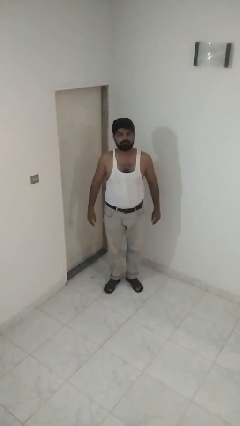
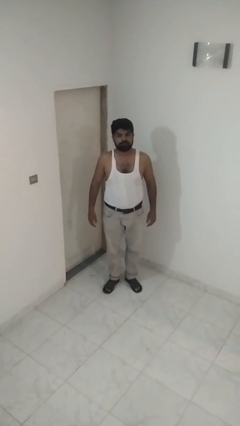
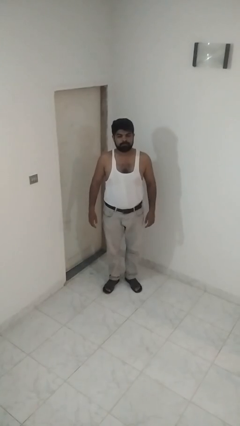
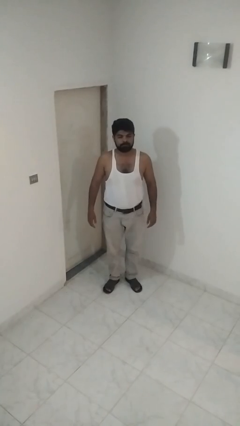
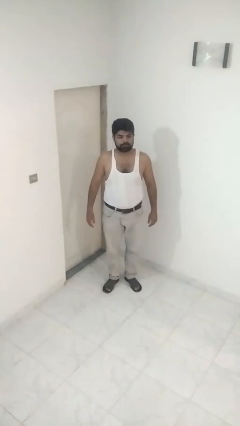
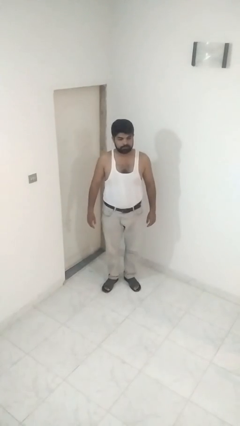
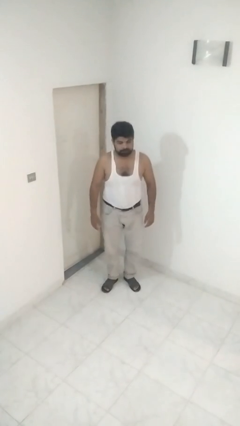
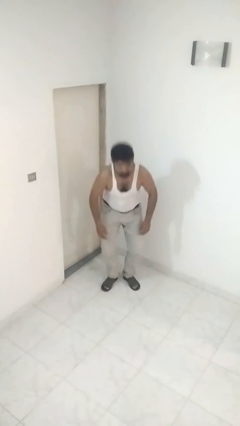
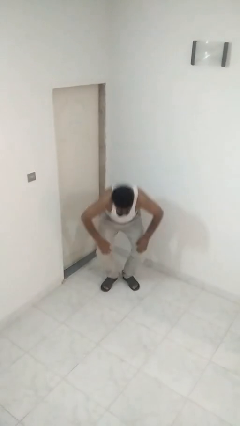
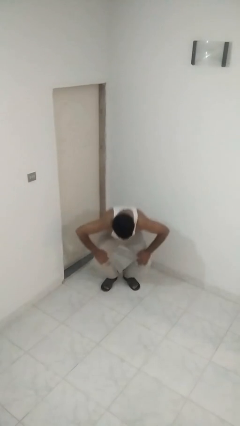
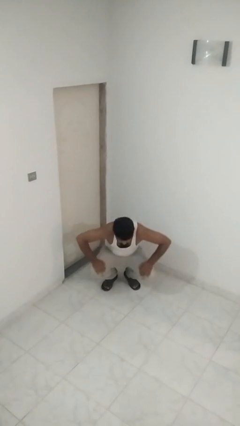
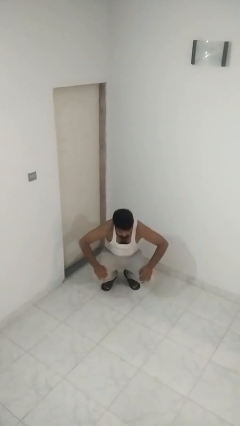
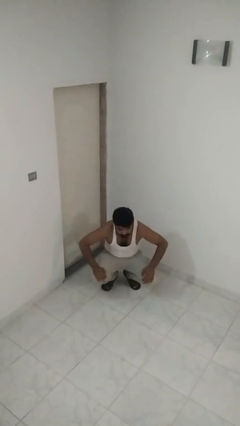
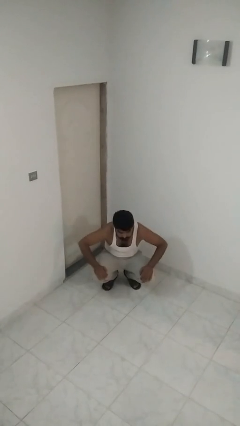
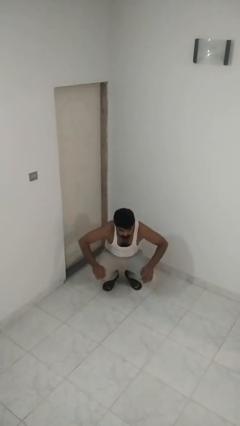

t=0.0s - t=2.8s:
person squats

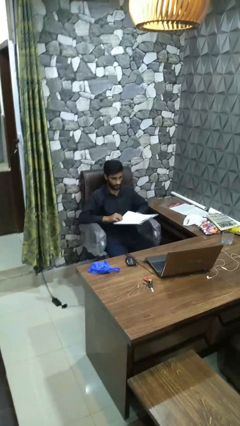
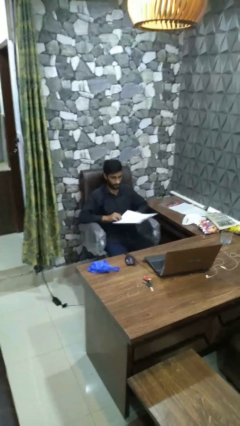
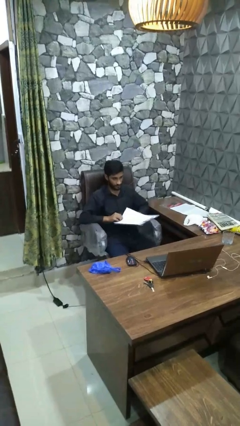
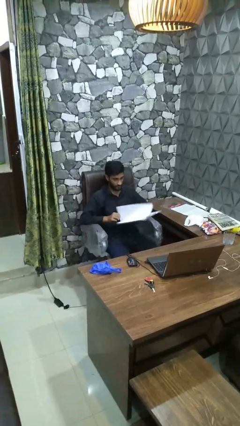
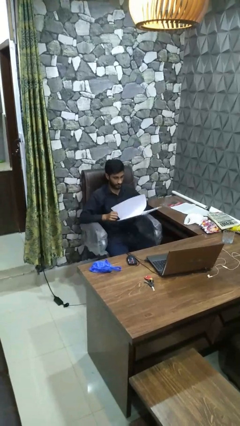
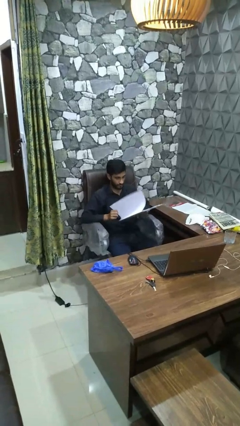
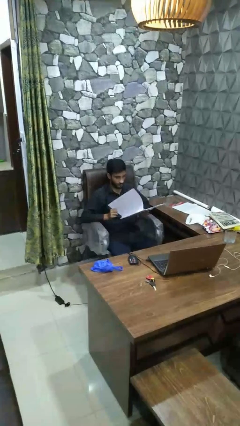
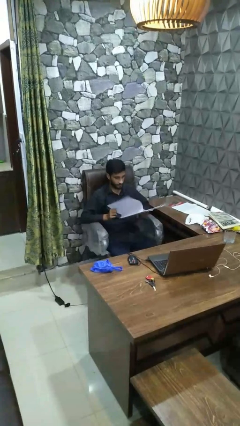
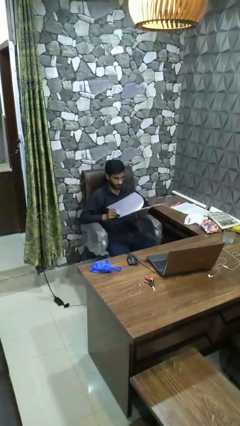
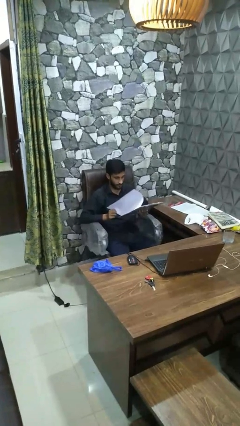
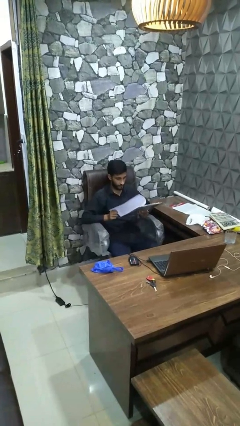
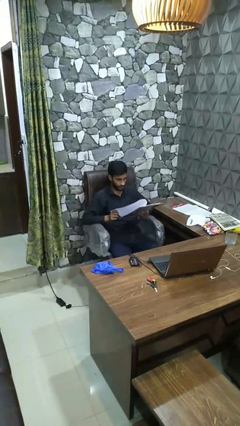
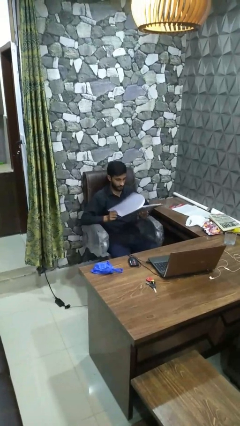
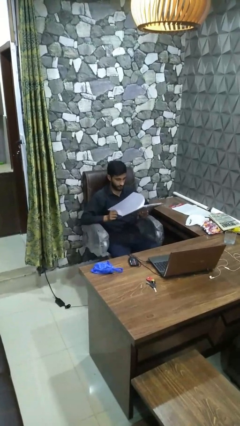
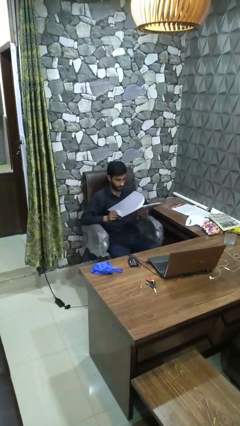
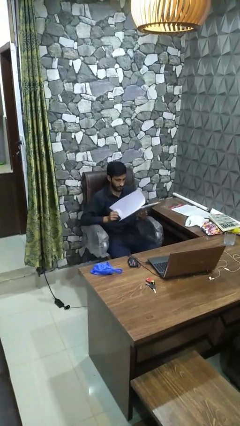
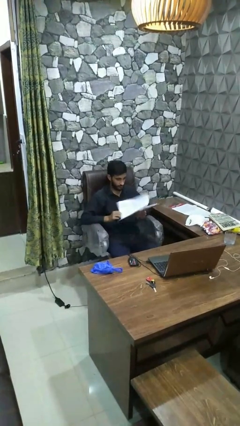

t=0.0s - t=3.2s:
person reads book

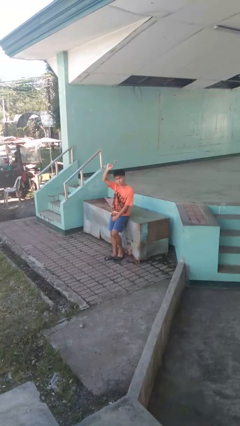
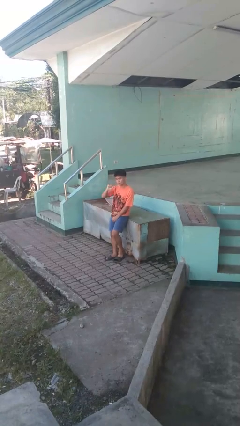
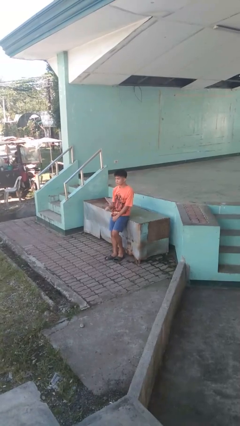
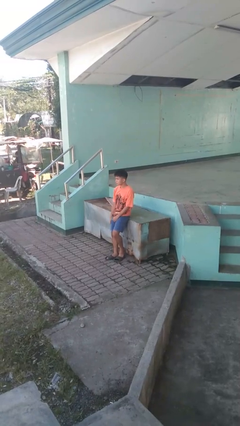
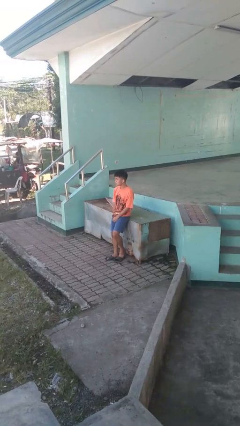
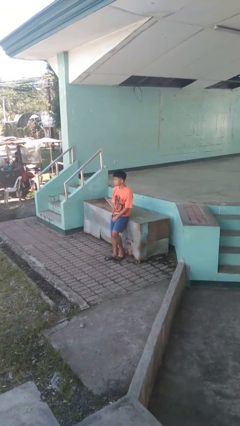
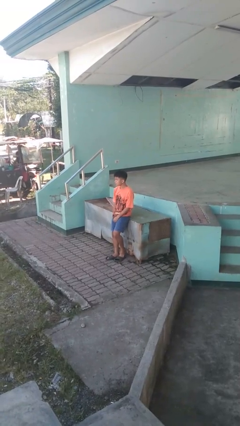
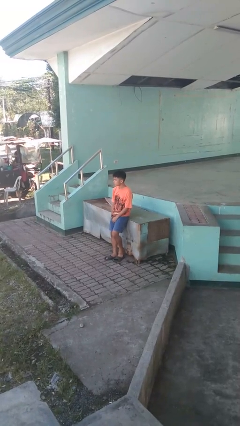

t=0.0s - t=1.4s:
person gestures lower hand

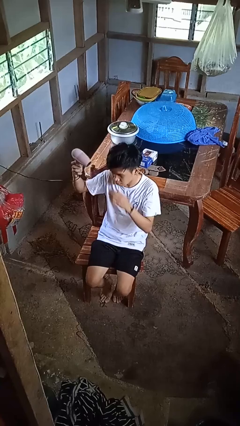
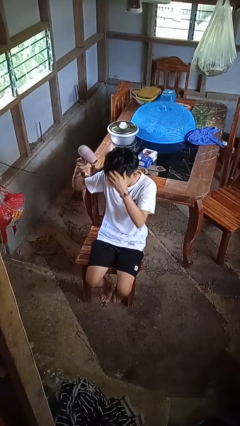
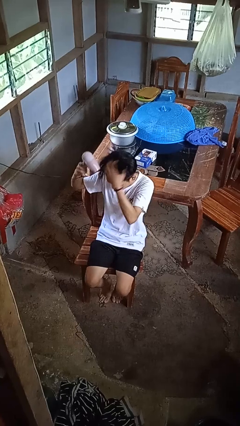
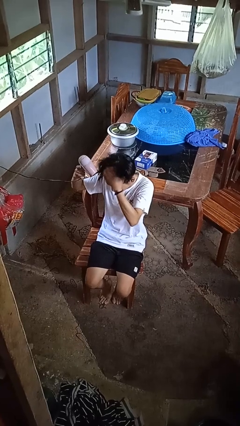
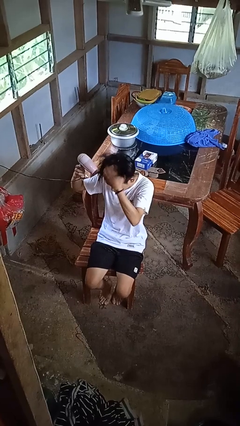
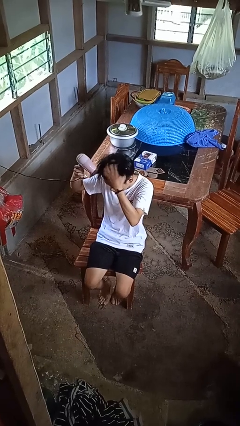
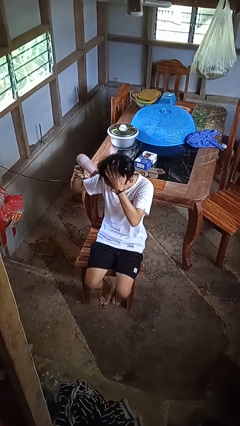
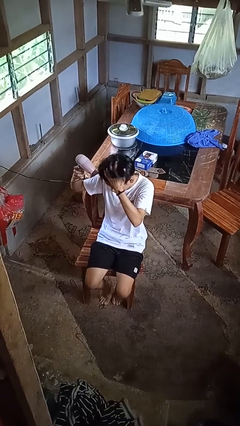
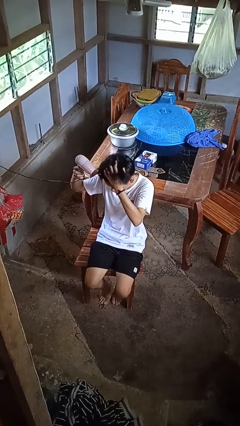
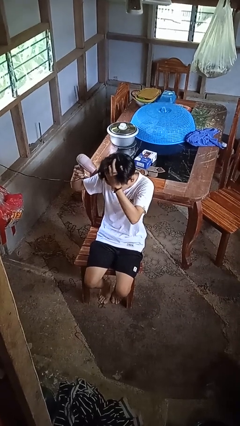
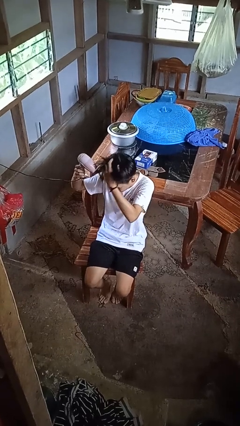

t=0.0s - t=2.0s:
person dries hair with hairdryer

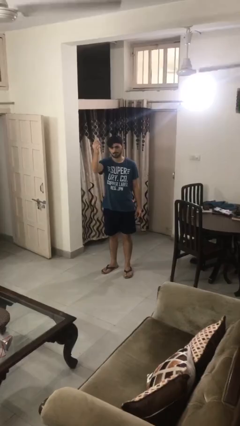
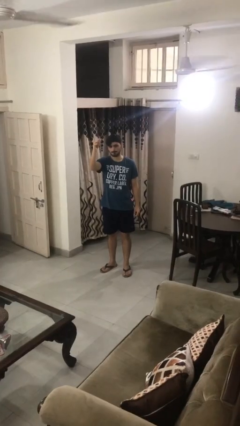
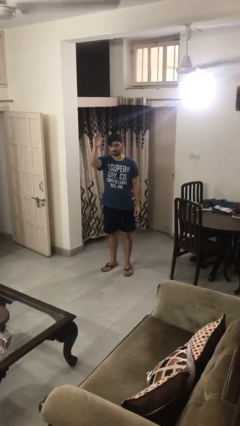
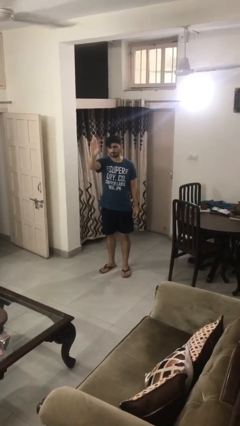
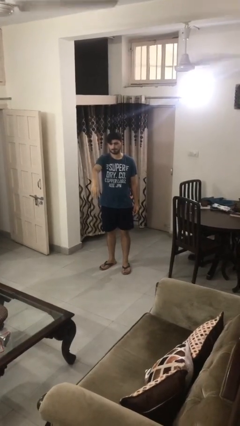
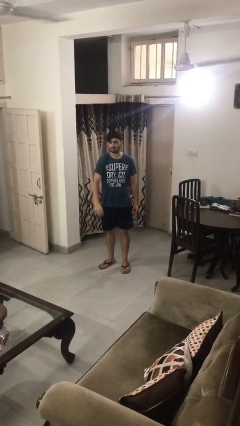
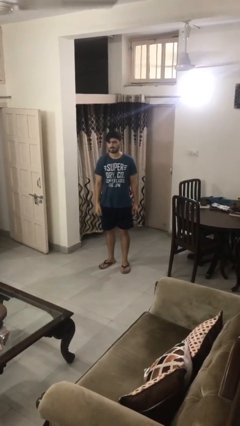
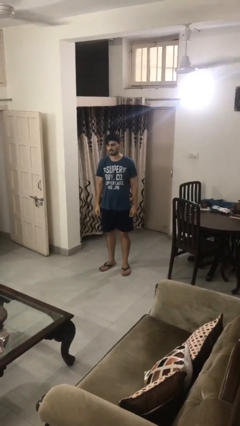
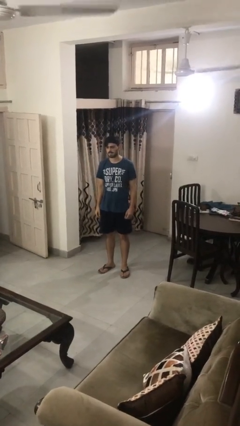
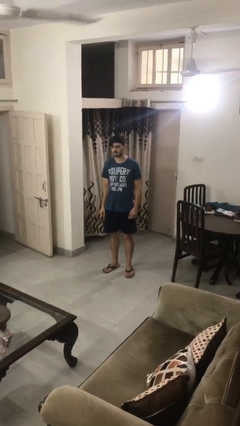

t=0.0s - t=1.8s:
person gestures swipe down

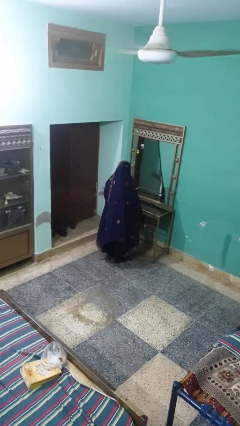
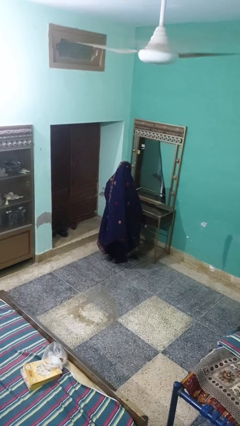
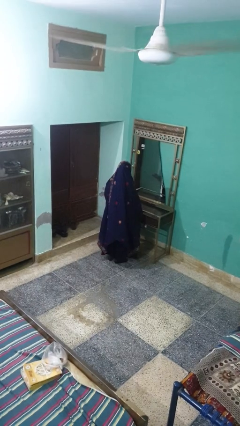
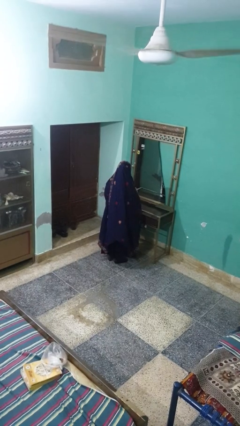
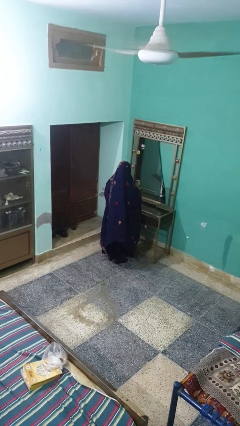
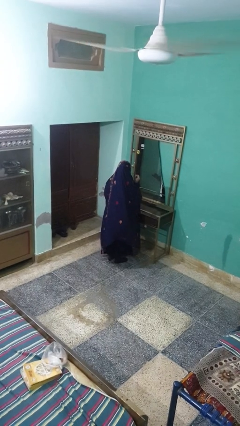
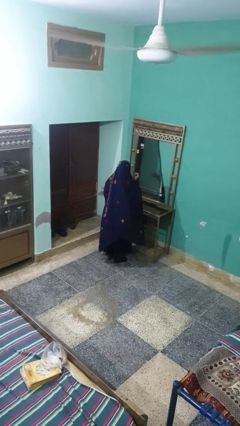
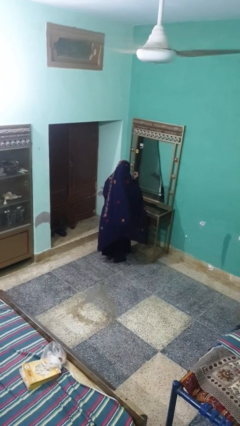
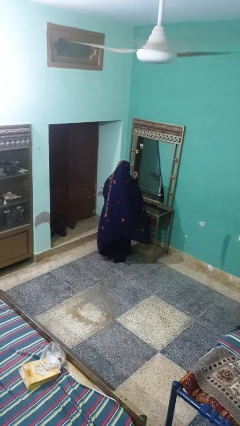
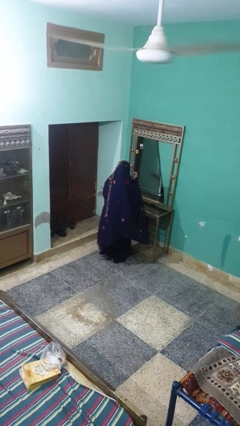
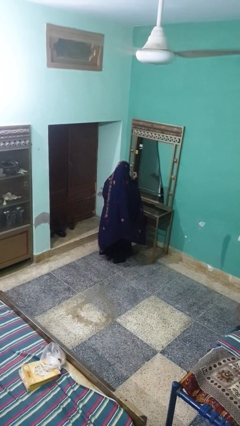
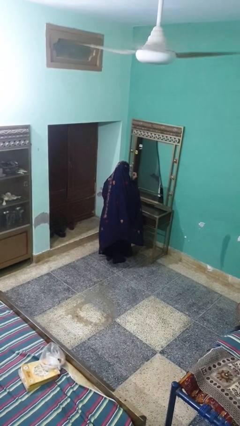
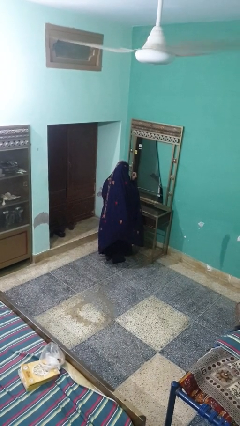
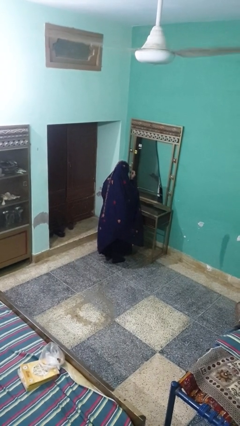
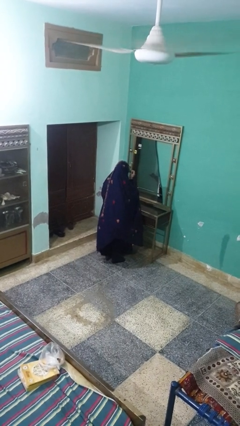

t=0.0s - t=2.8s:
person applies eye makeup

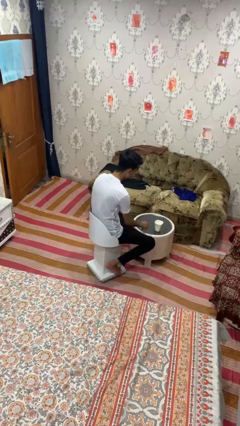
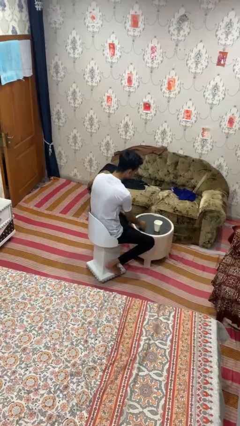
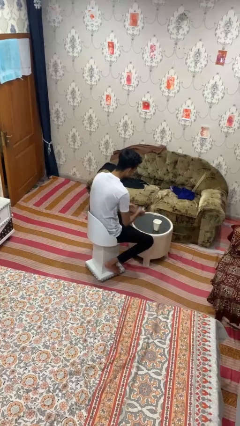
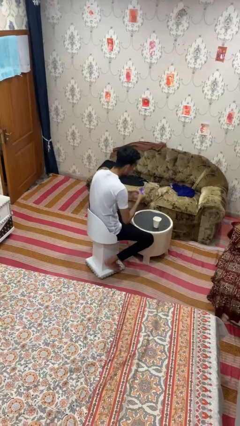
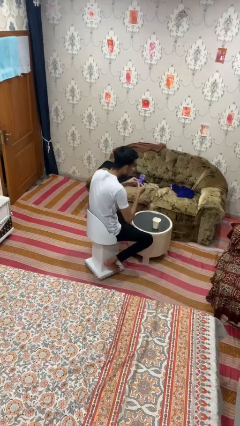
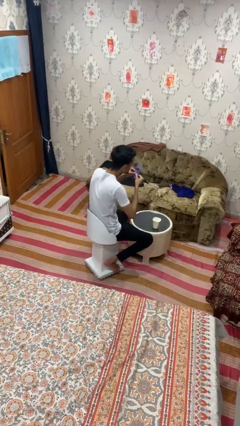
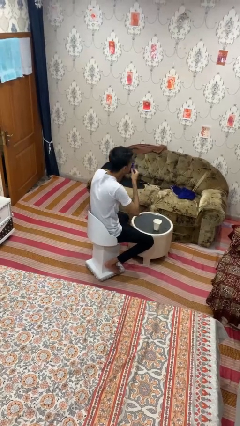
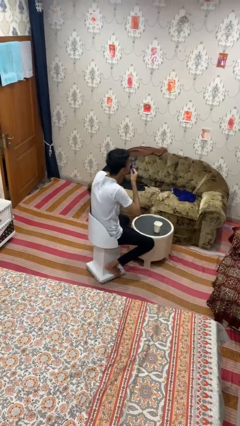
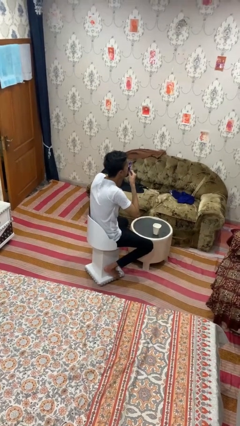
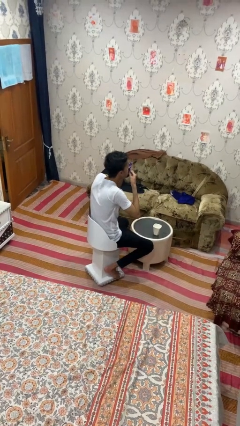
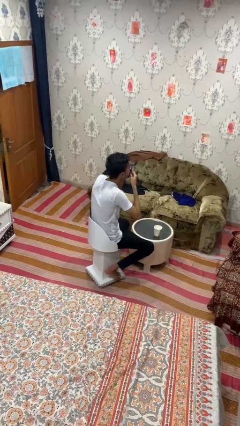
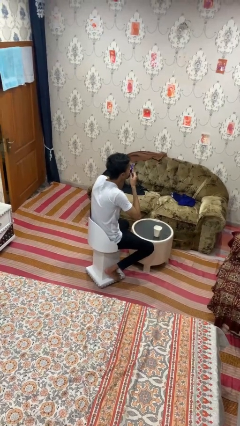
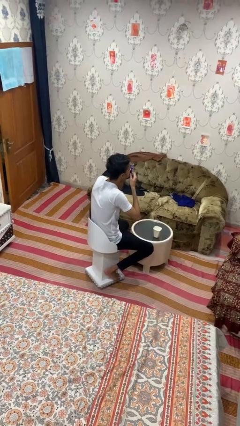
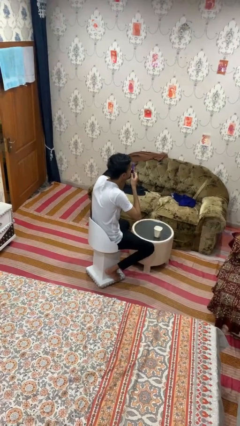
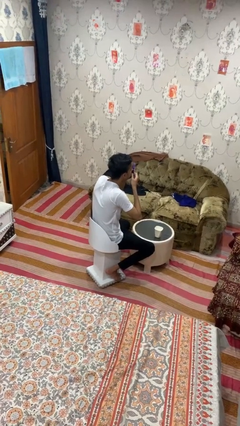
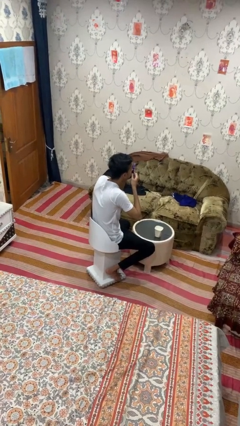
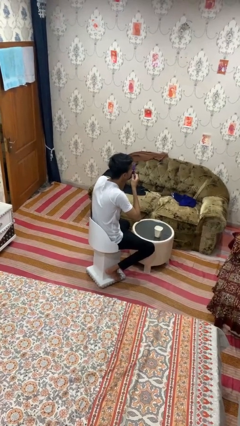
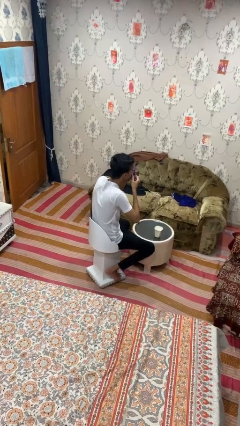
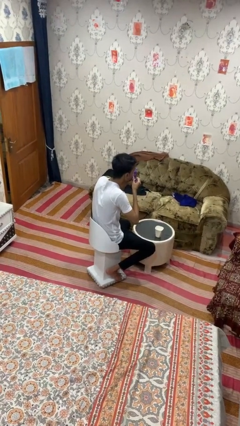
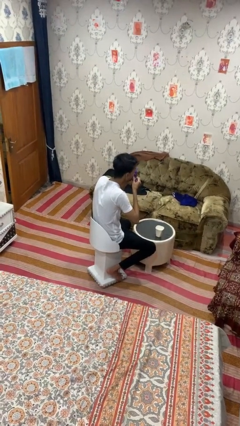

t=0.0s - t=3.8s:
person takes medicine pills
